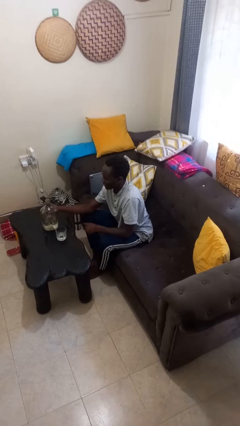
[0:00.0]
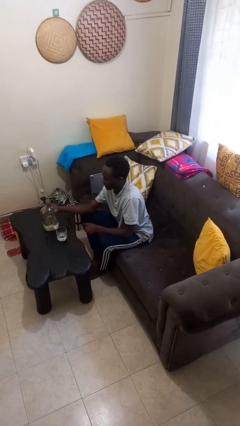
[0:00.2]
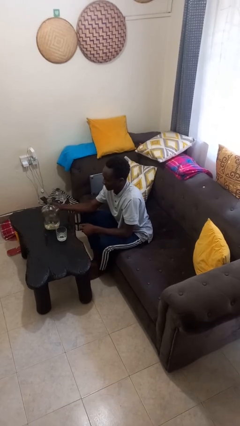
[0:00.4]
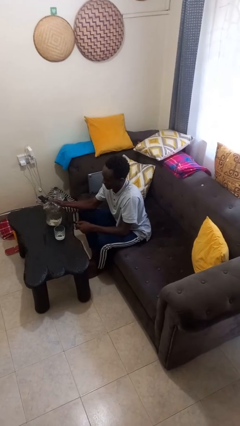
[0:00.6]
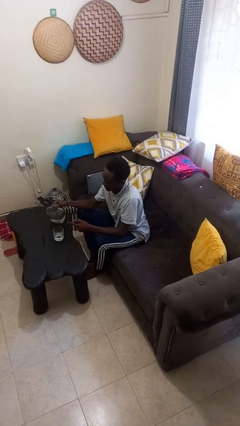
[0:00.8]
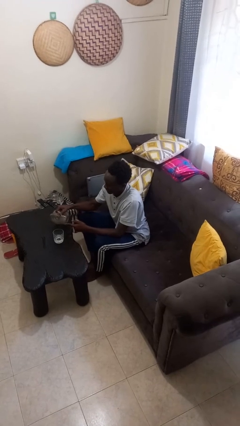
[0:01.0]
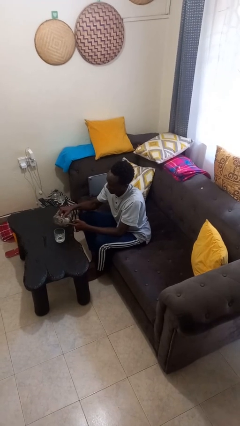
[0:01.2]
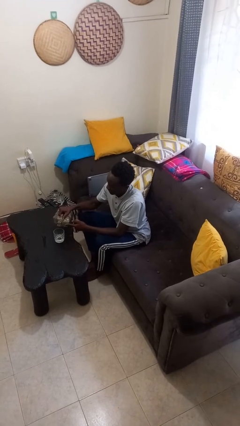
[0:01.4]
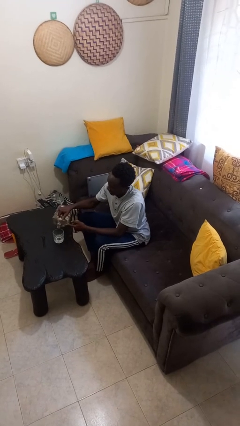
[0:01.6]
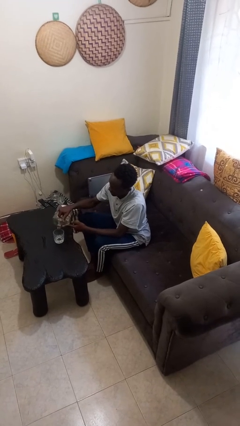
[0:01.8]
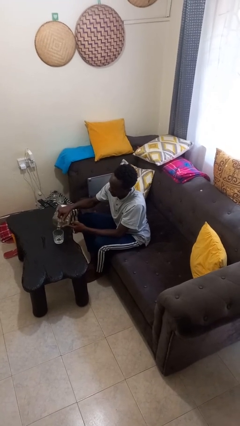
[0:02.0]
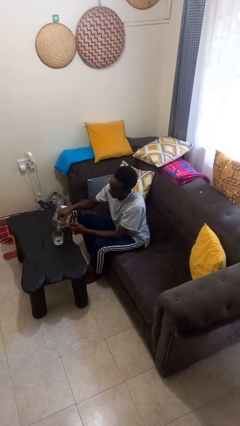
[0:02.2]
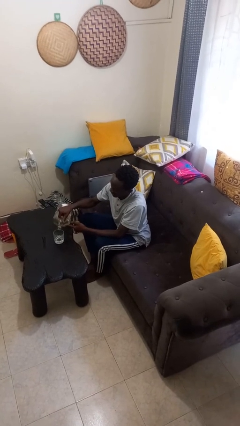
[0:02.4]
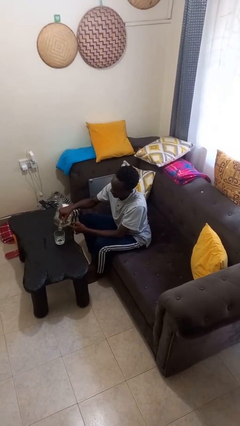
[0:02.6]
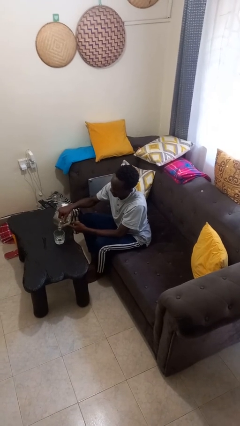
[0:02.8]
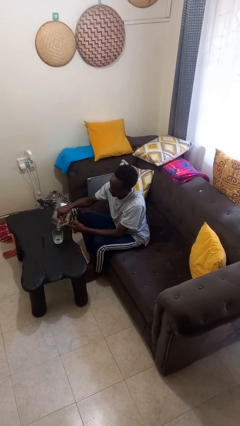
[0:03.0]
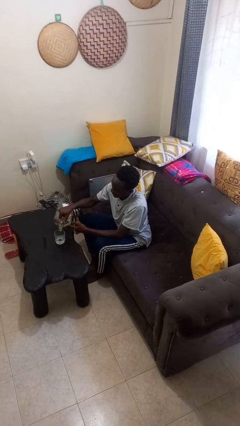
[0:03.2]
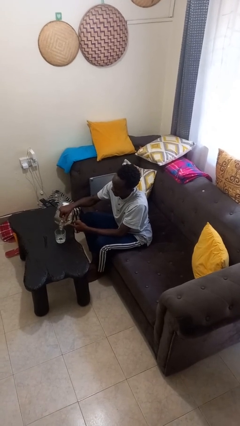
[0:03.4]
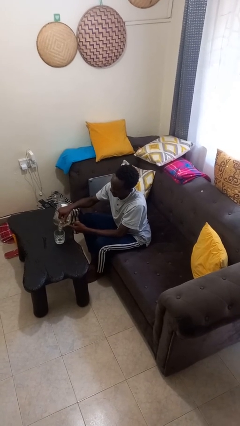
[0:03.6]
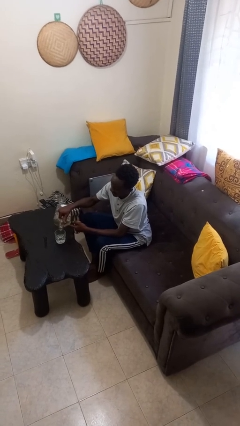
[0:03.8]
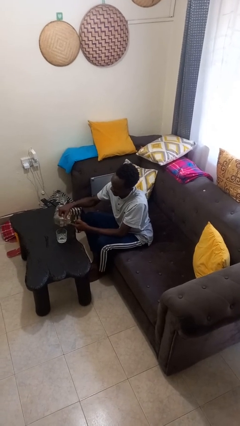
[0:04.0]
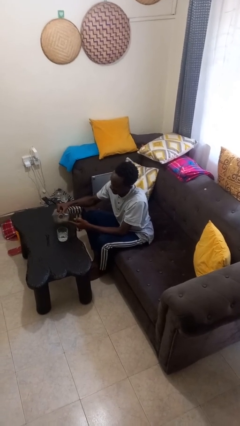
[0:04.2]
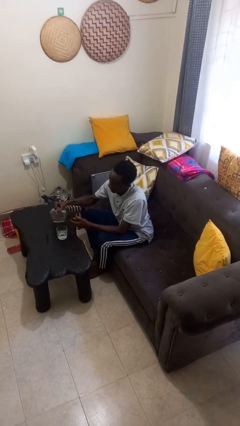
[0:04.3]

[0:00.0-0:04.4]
person pours liquid into cup

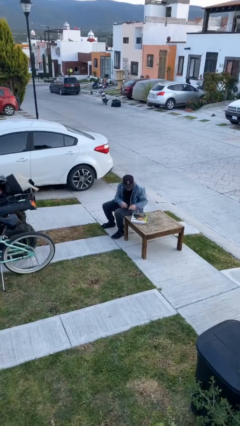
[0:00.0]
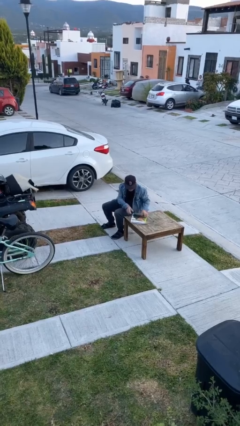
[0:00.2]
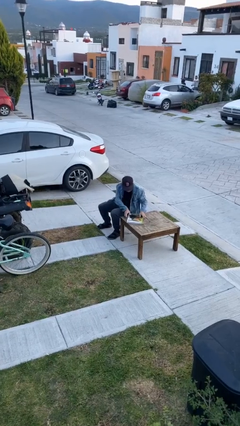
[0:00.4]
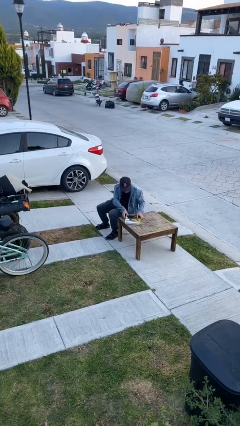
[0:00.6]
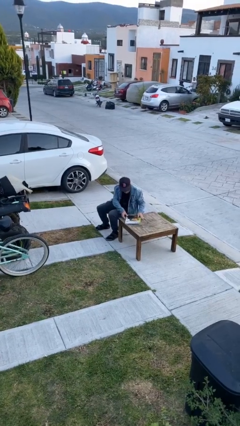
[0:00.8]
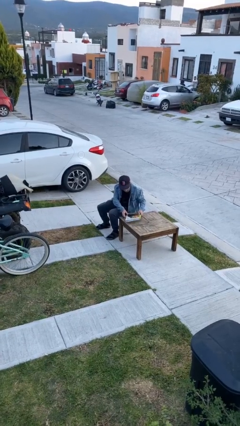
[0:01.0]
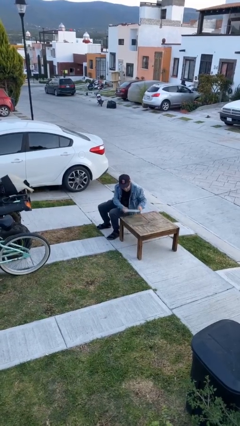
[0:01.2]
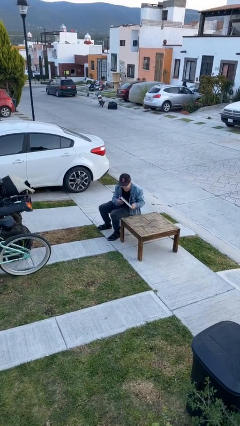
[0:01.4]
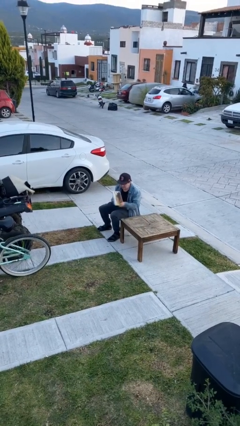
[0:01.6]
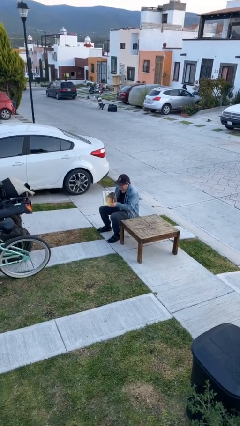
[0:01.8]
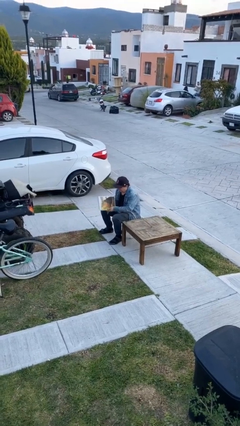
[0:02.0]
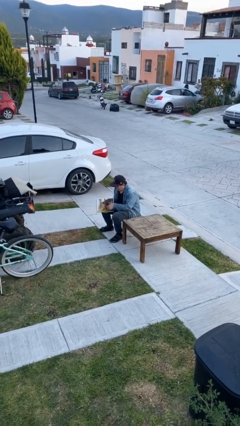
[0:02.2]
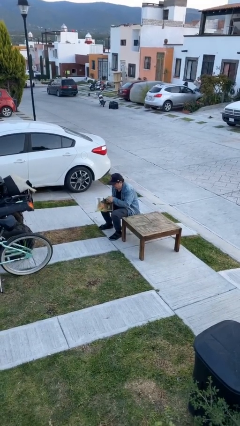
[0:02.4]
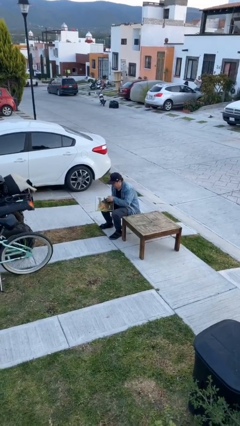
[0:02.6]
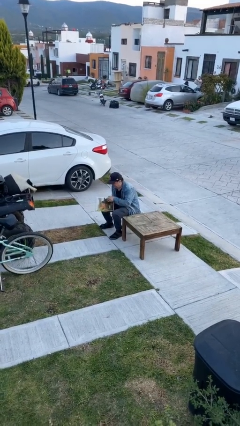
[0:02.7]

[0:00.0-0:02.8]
person picks up object from table

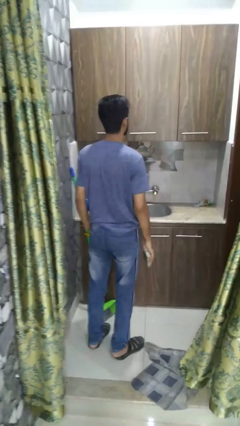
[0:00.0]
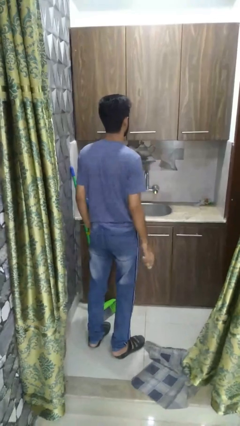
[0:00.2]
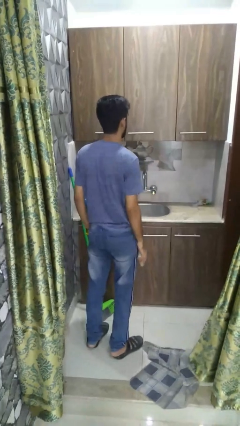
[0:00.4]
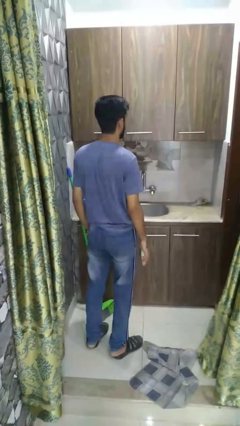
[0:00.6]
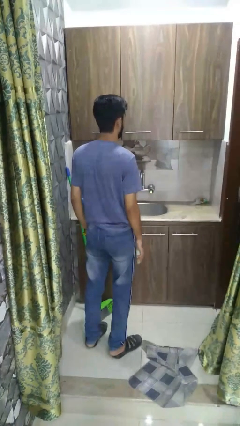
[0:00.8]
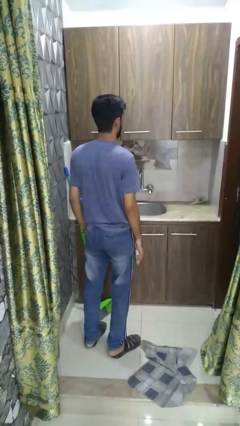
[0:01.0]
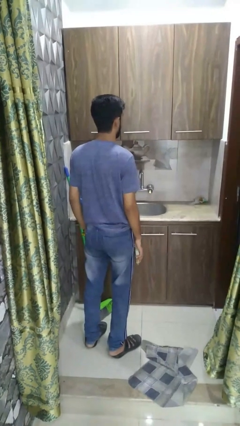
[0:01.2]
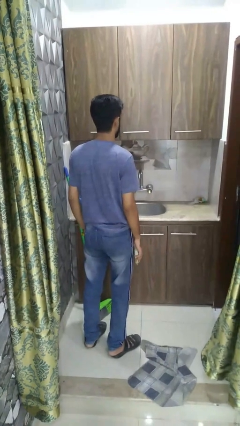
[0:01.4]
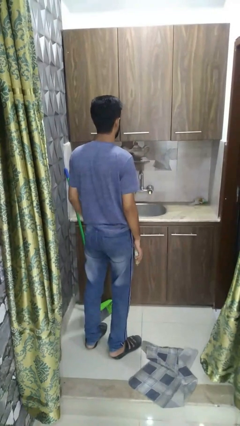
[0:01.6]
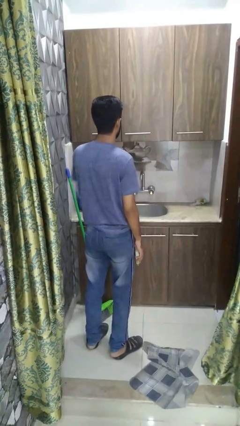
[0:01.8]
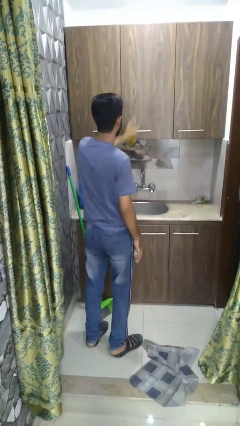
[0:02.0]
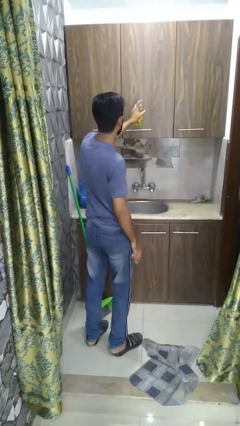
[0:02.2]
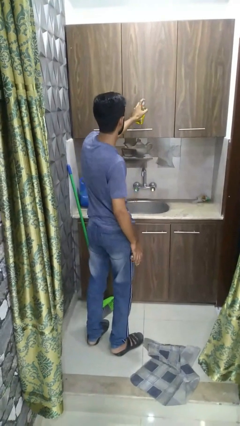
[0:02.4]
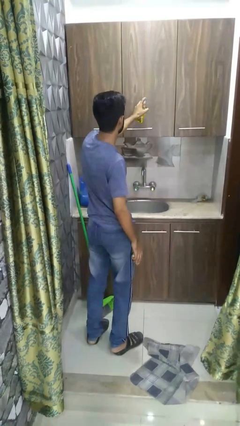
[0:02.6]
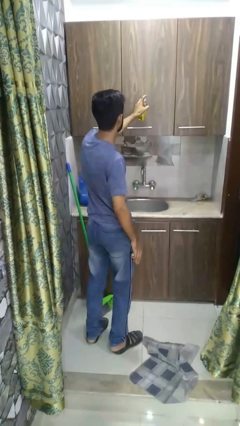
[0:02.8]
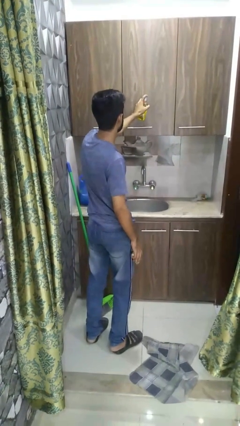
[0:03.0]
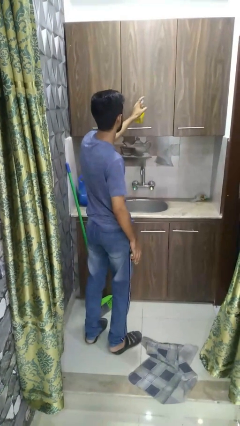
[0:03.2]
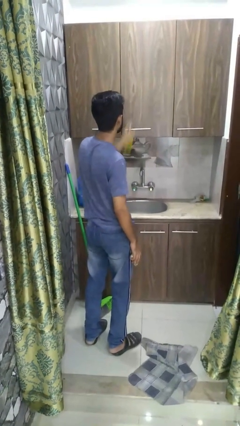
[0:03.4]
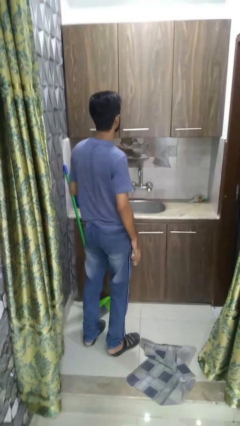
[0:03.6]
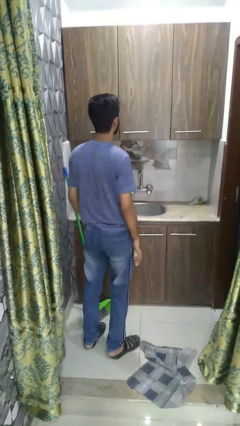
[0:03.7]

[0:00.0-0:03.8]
person sprays from bottle

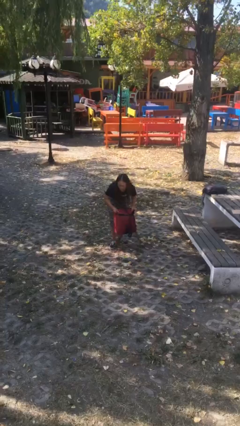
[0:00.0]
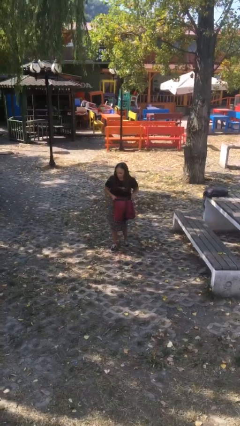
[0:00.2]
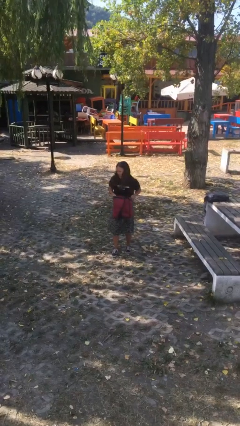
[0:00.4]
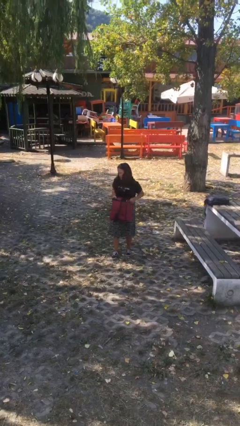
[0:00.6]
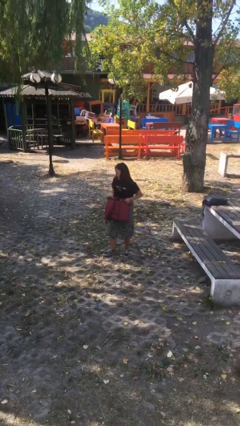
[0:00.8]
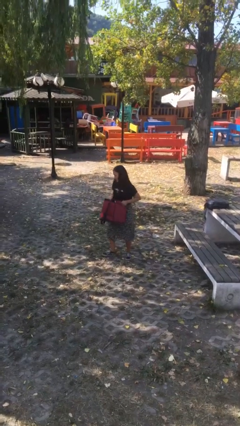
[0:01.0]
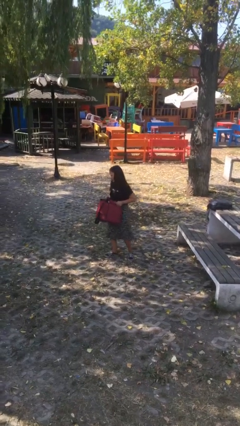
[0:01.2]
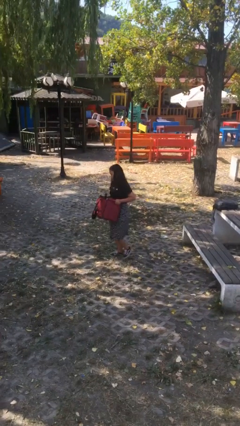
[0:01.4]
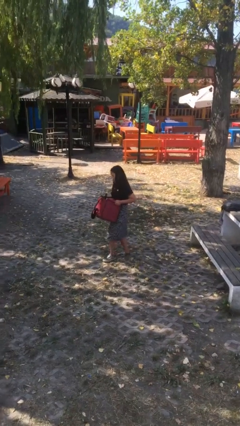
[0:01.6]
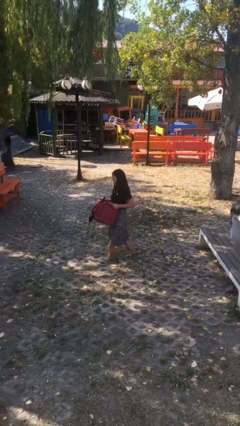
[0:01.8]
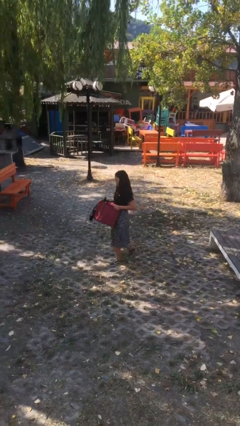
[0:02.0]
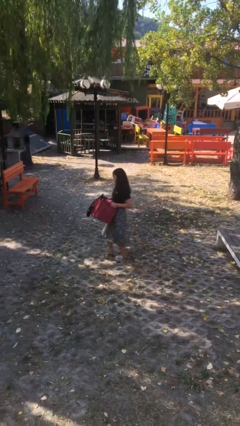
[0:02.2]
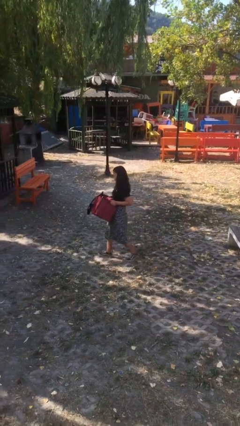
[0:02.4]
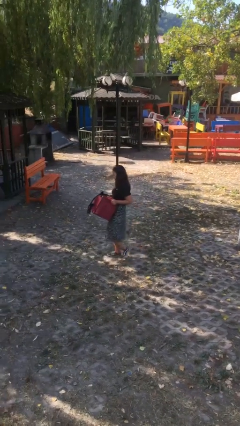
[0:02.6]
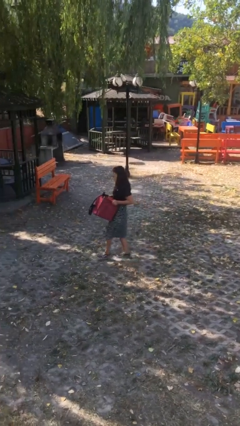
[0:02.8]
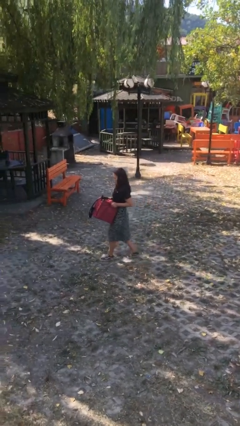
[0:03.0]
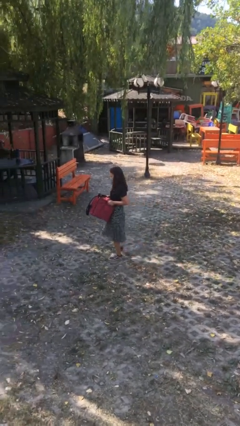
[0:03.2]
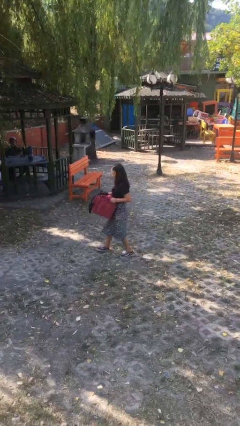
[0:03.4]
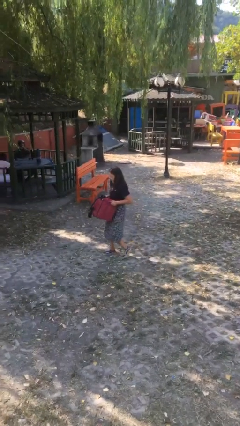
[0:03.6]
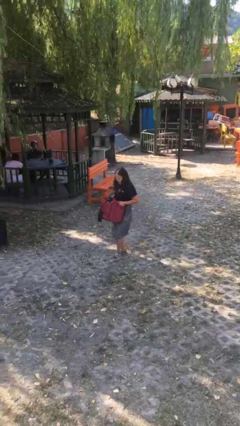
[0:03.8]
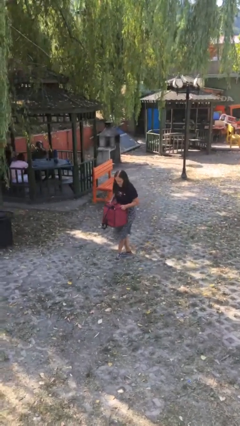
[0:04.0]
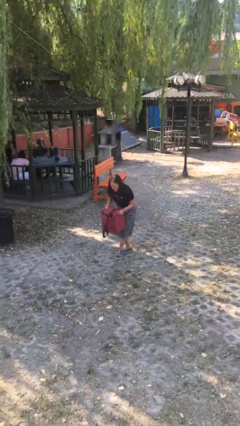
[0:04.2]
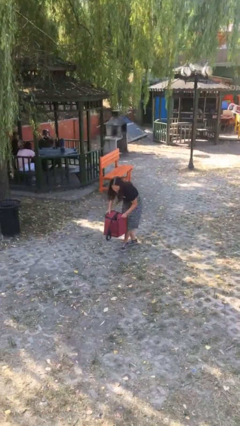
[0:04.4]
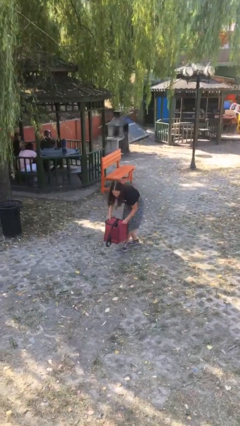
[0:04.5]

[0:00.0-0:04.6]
person carries heavy object

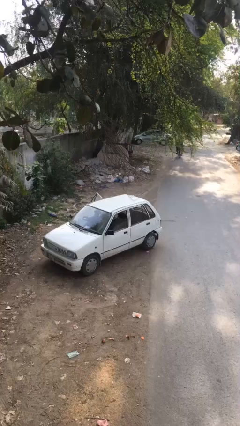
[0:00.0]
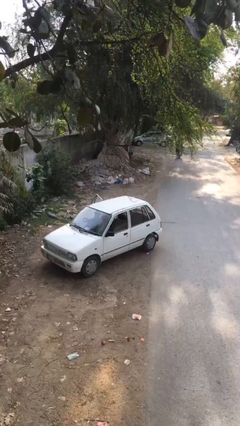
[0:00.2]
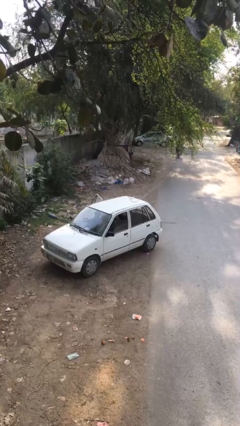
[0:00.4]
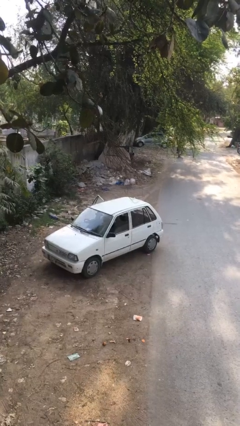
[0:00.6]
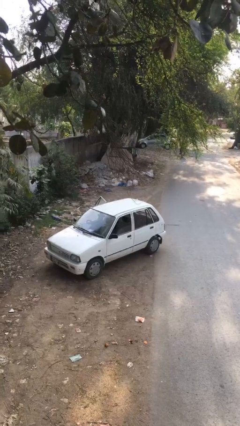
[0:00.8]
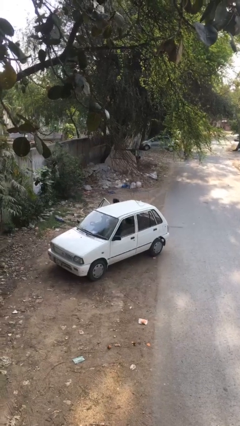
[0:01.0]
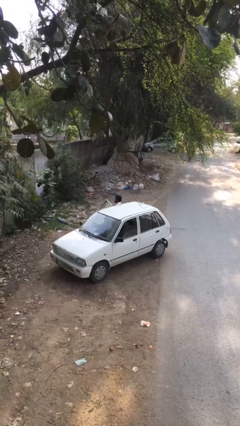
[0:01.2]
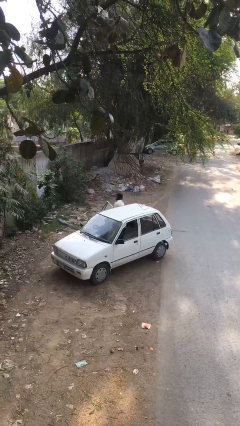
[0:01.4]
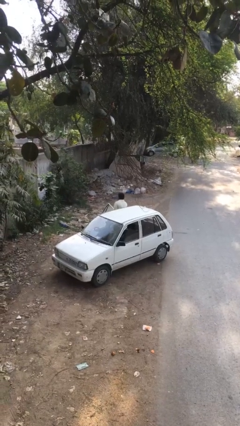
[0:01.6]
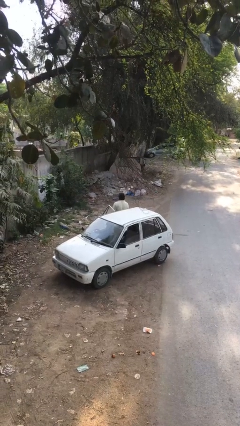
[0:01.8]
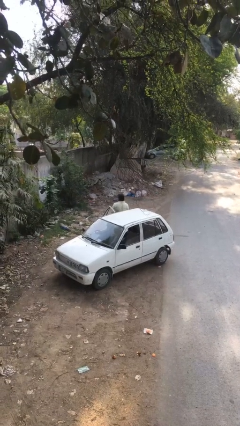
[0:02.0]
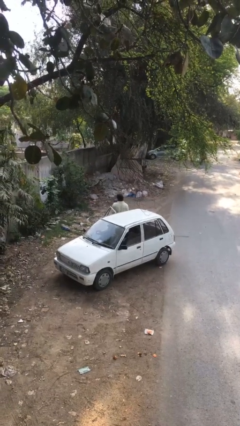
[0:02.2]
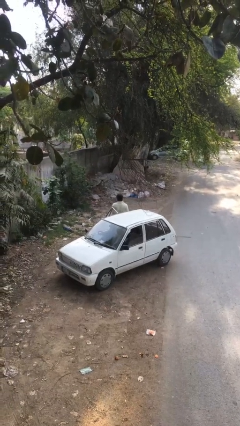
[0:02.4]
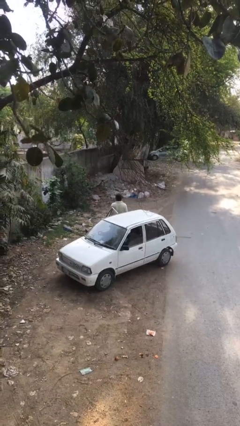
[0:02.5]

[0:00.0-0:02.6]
person exits car
